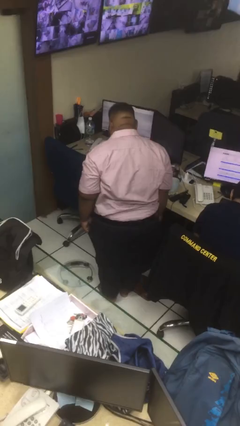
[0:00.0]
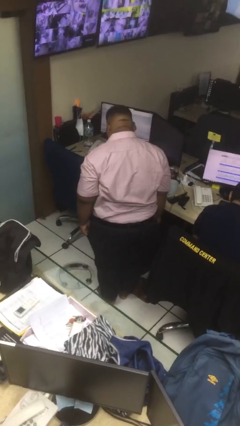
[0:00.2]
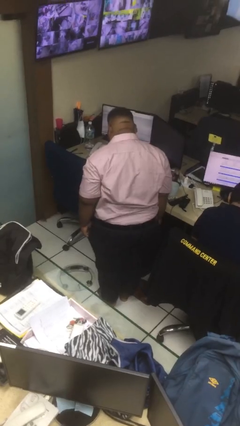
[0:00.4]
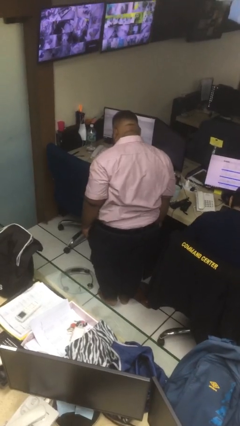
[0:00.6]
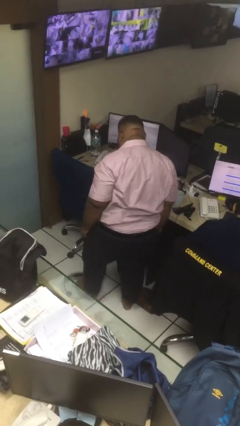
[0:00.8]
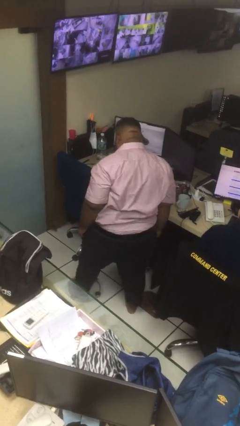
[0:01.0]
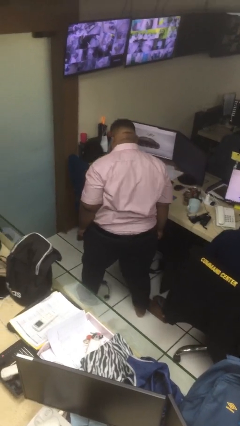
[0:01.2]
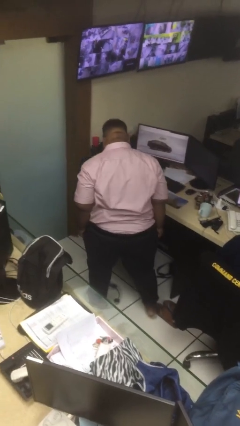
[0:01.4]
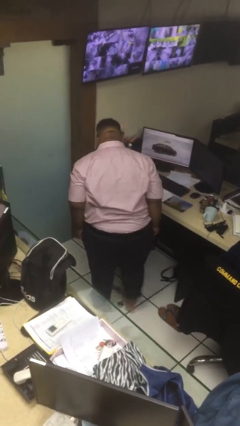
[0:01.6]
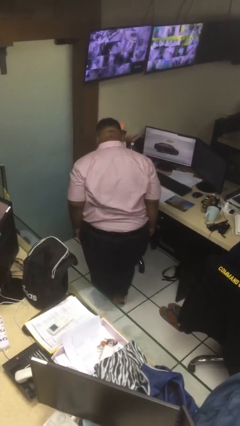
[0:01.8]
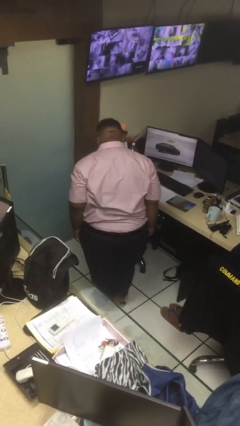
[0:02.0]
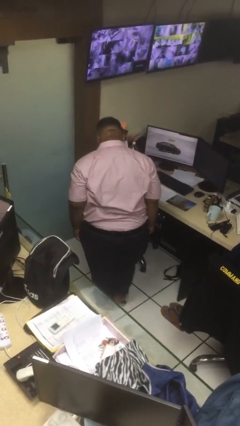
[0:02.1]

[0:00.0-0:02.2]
person uses bodyweight scale

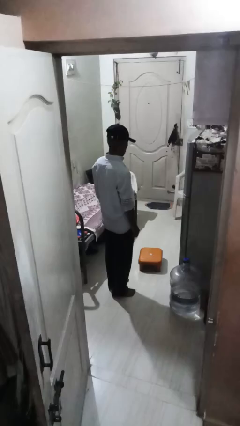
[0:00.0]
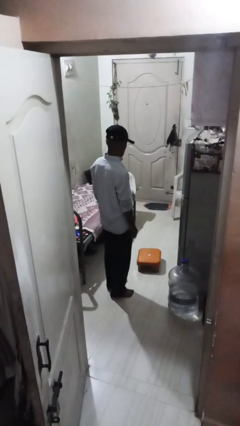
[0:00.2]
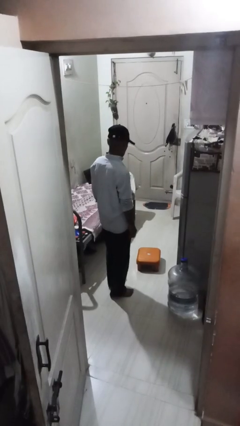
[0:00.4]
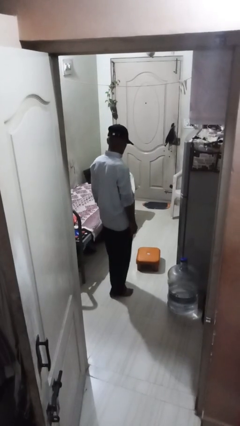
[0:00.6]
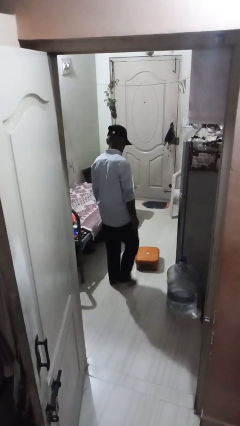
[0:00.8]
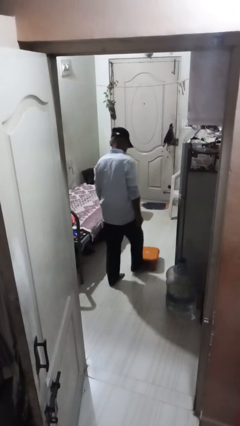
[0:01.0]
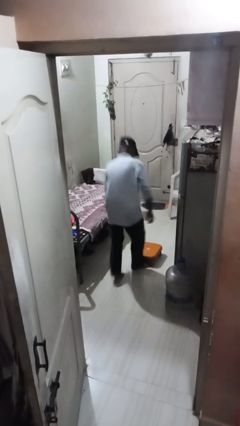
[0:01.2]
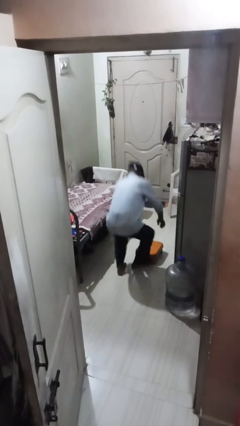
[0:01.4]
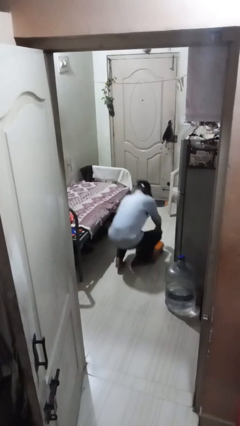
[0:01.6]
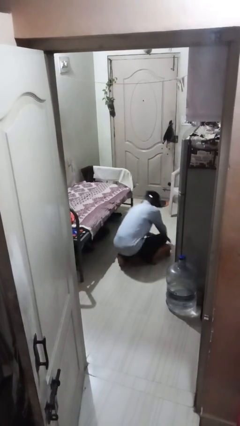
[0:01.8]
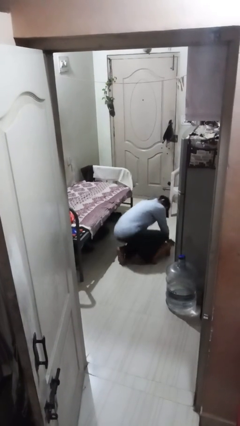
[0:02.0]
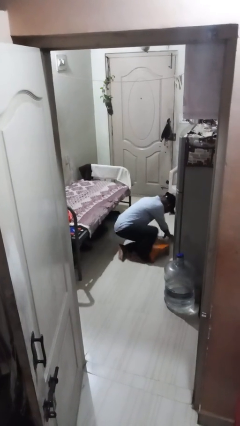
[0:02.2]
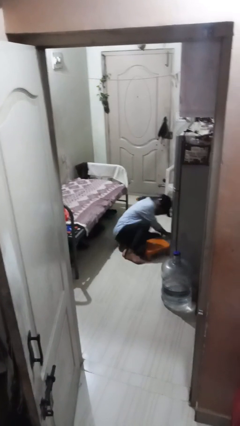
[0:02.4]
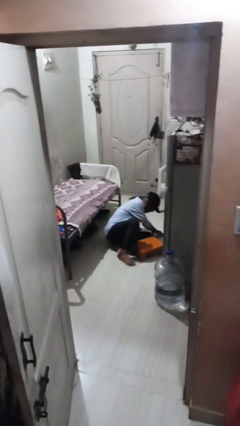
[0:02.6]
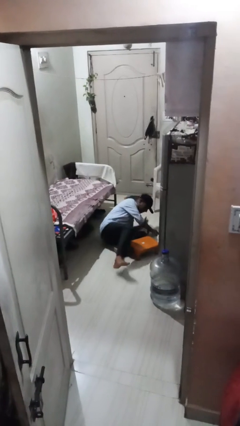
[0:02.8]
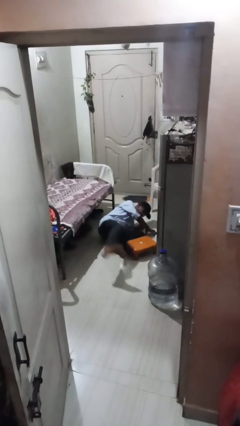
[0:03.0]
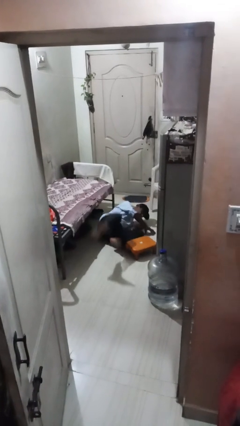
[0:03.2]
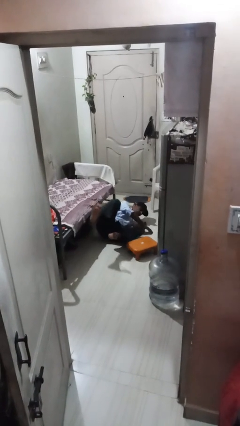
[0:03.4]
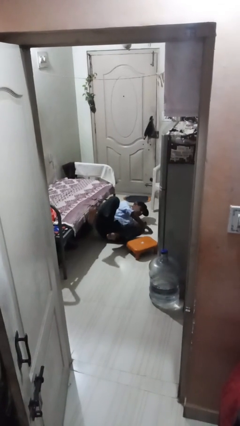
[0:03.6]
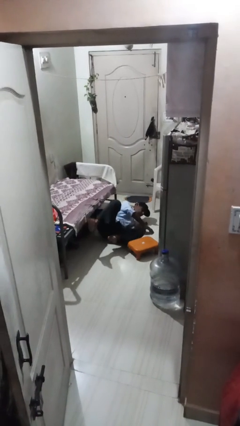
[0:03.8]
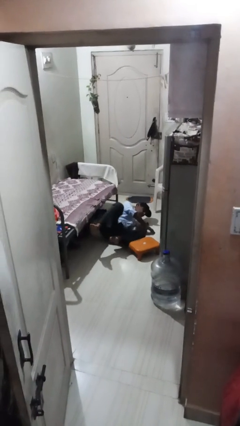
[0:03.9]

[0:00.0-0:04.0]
person trips on object on floor

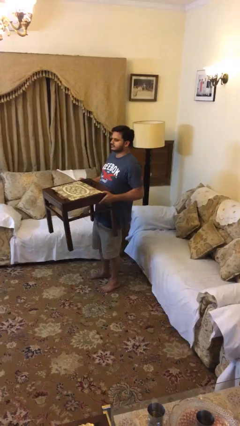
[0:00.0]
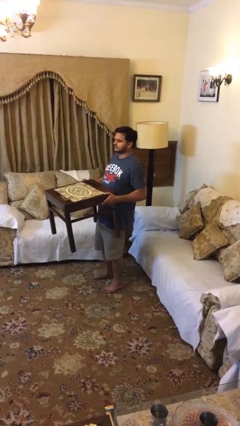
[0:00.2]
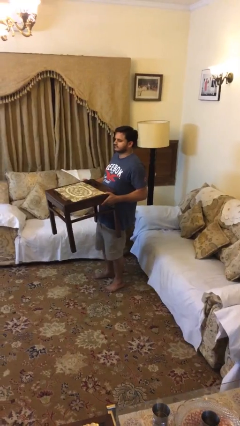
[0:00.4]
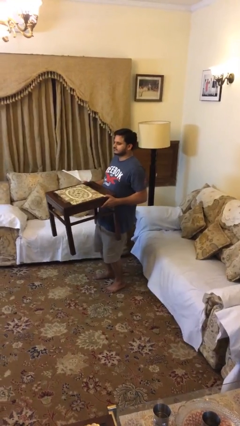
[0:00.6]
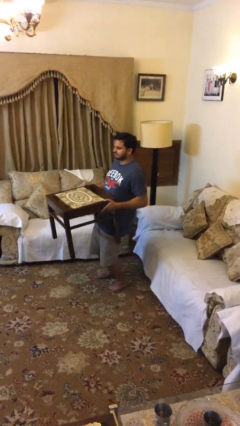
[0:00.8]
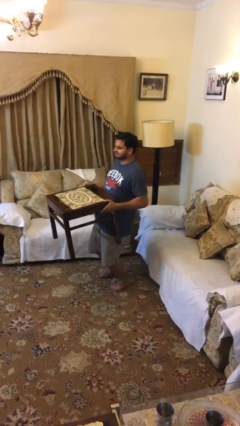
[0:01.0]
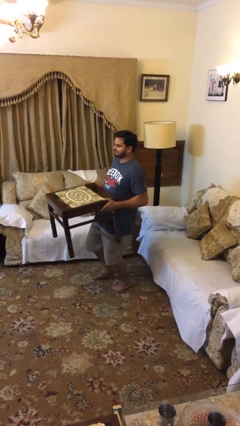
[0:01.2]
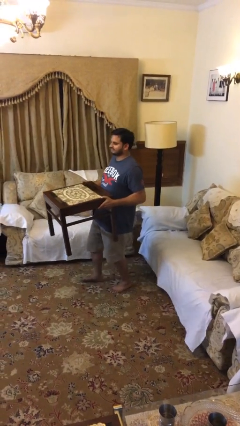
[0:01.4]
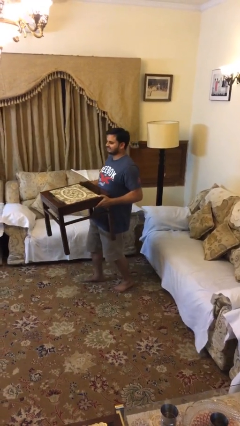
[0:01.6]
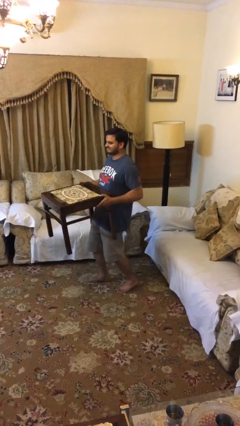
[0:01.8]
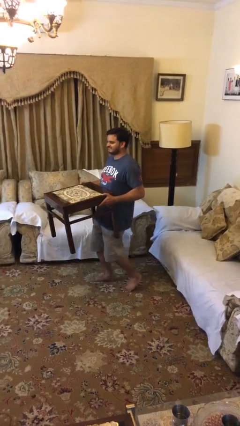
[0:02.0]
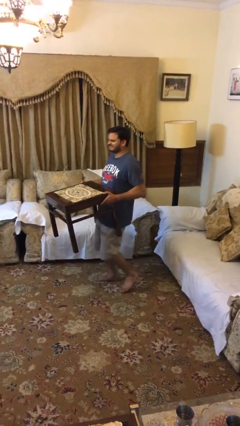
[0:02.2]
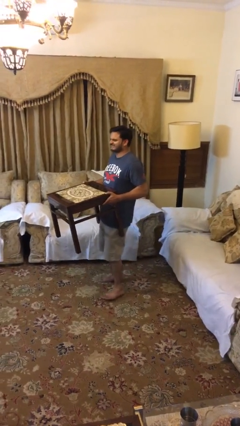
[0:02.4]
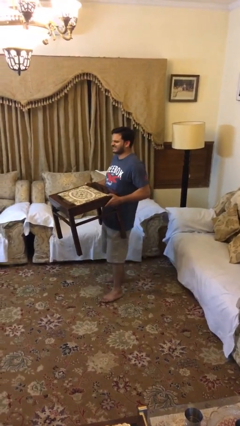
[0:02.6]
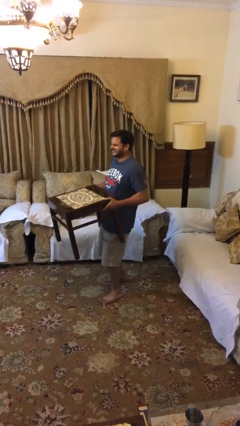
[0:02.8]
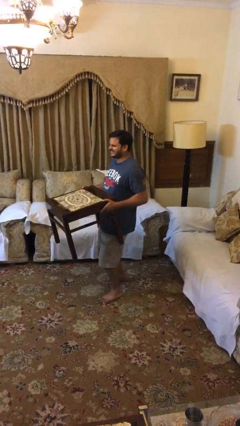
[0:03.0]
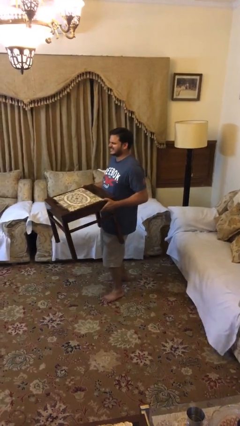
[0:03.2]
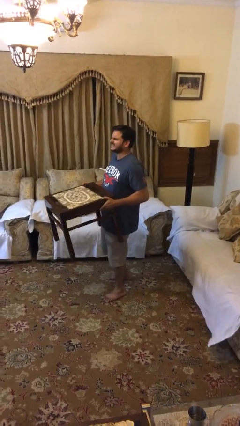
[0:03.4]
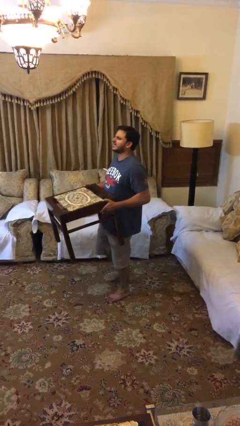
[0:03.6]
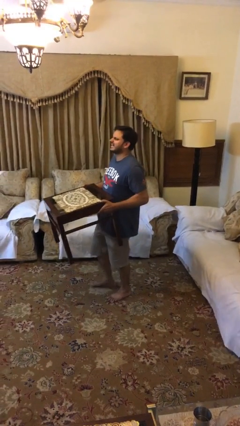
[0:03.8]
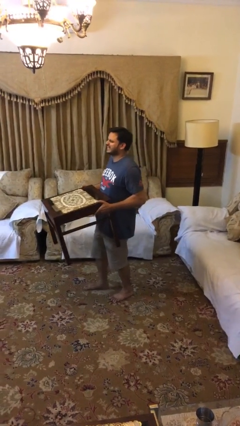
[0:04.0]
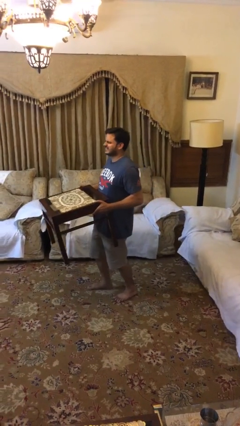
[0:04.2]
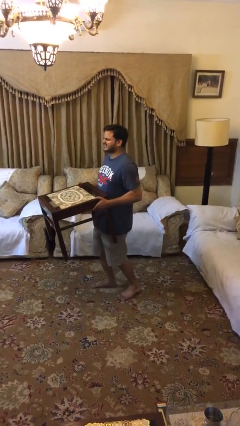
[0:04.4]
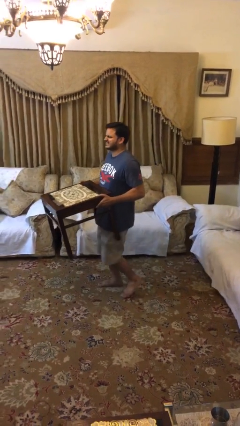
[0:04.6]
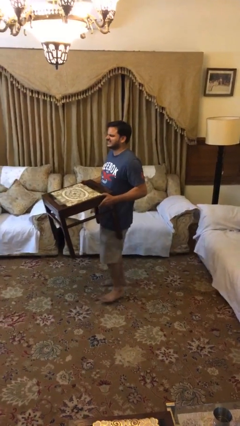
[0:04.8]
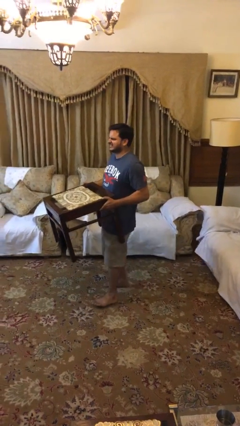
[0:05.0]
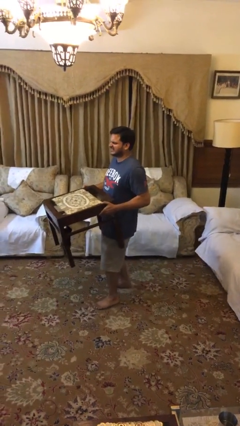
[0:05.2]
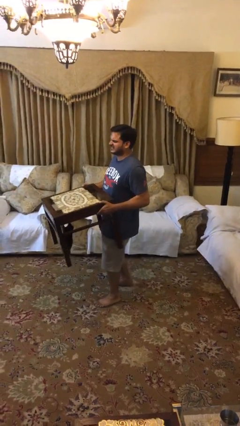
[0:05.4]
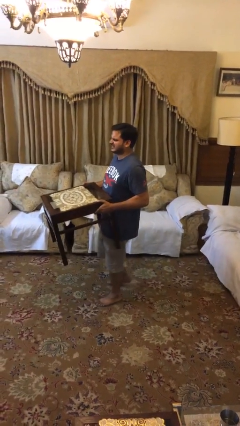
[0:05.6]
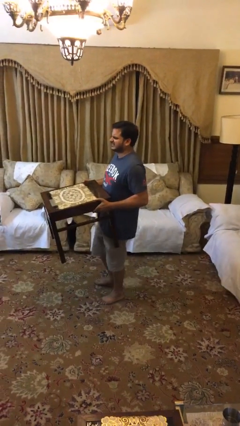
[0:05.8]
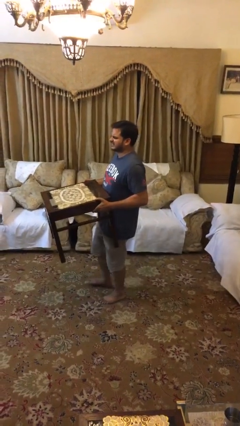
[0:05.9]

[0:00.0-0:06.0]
person carries heavy object

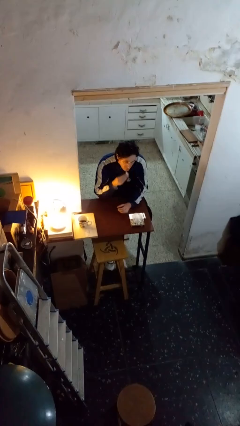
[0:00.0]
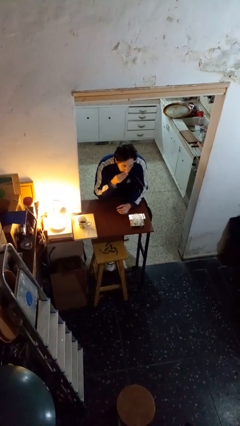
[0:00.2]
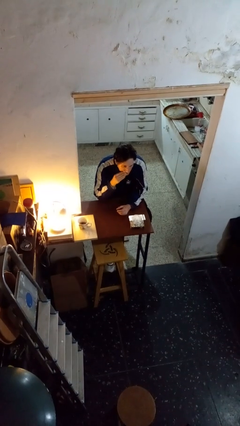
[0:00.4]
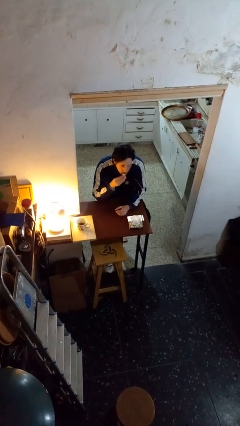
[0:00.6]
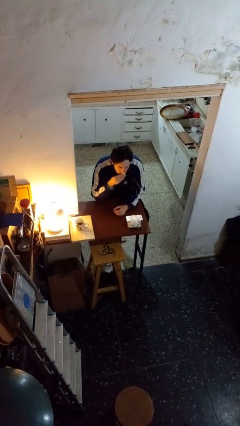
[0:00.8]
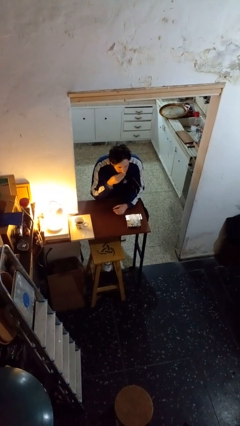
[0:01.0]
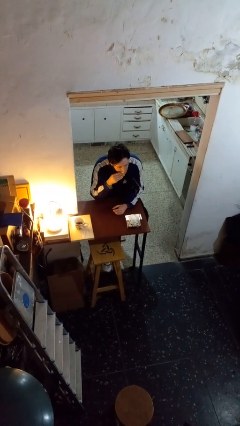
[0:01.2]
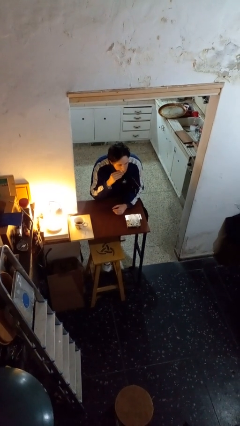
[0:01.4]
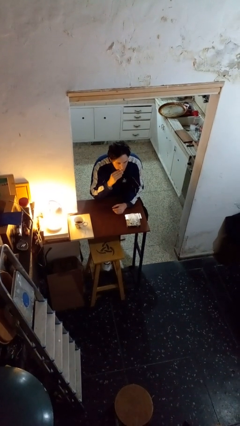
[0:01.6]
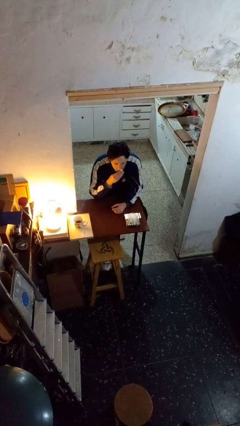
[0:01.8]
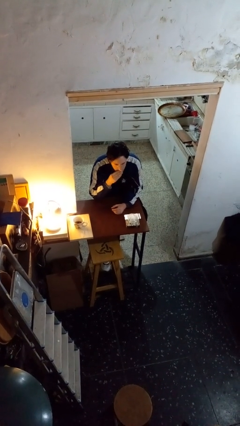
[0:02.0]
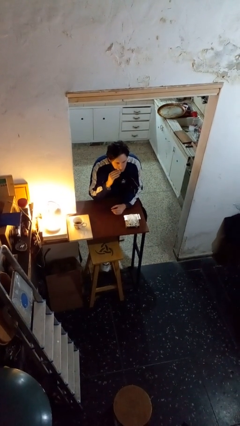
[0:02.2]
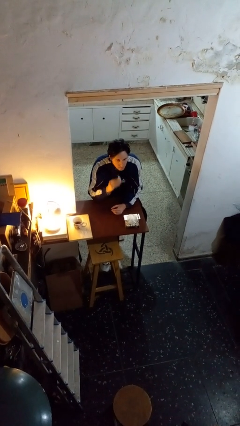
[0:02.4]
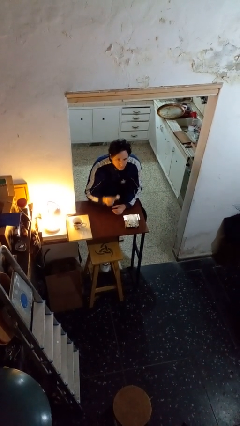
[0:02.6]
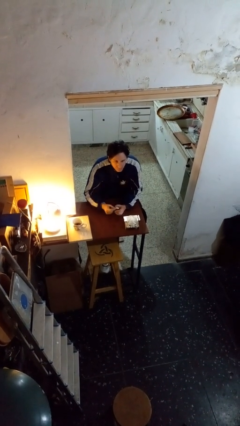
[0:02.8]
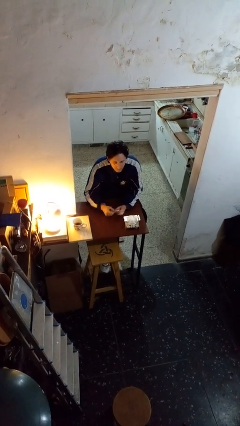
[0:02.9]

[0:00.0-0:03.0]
person wipes mouth with napkin

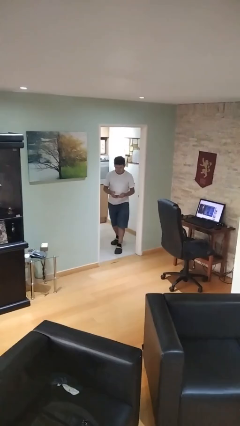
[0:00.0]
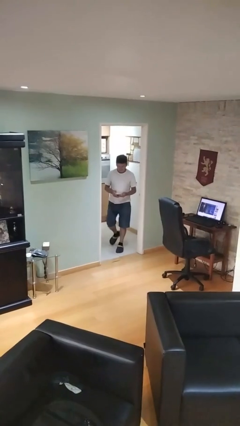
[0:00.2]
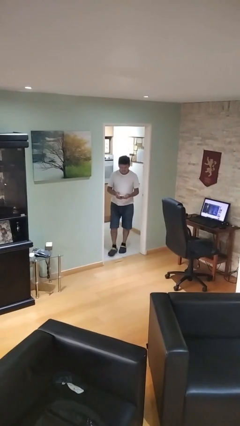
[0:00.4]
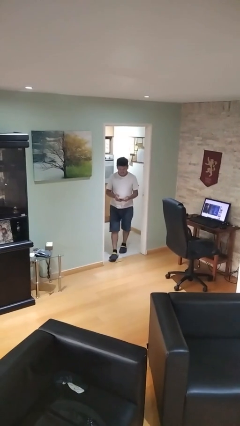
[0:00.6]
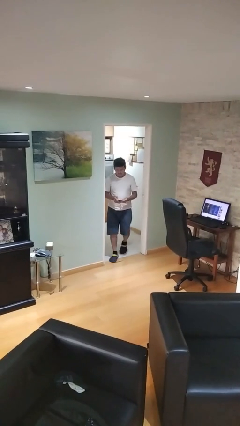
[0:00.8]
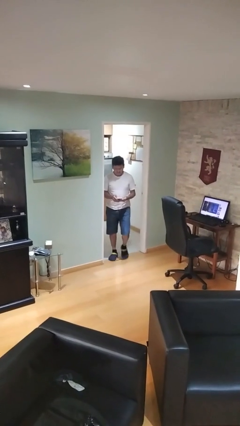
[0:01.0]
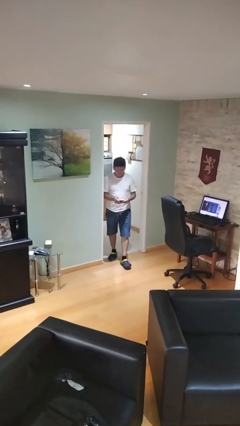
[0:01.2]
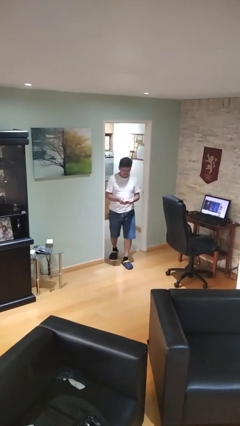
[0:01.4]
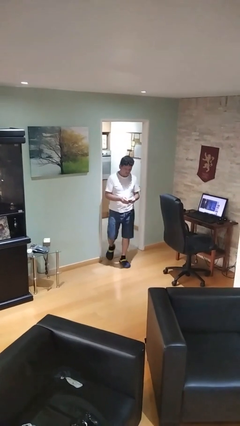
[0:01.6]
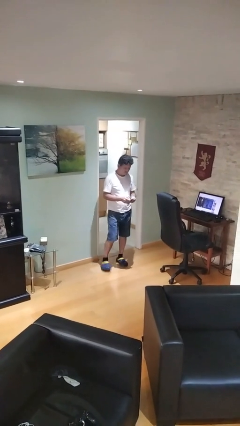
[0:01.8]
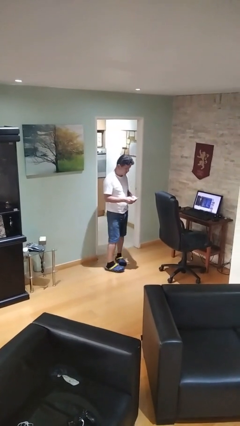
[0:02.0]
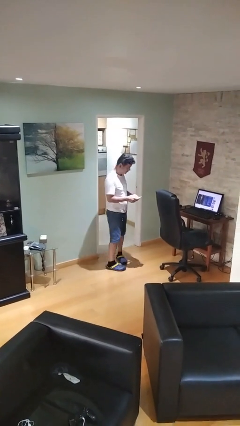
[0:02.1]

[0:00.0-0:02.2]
person enters scene through structure
